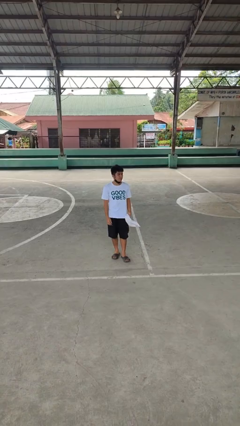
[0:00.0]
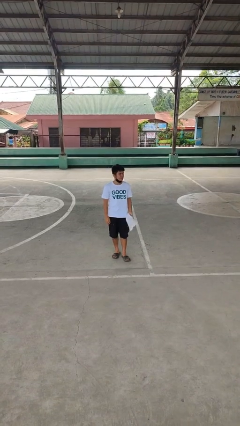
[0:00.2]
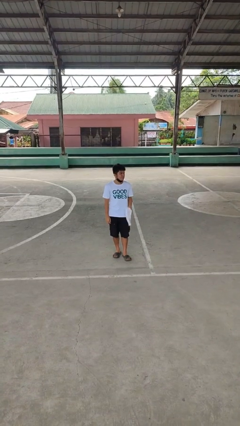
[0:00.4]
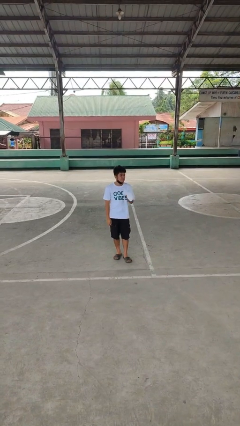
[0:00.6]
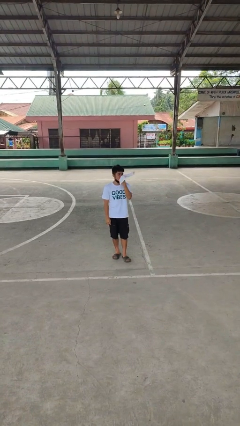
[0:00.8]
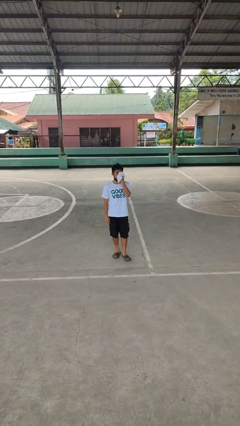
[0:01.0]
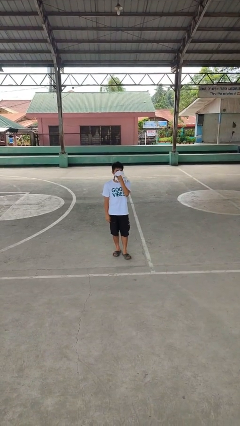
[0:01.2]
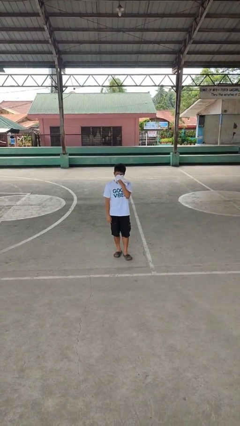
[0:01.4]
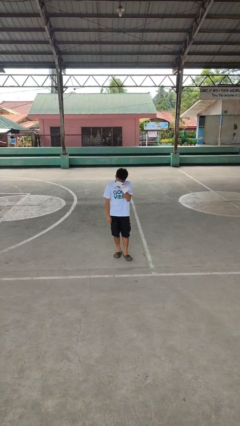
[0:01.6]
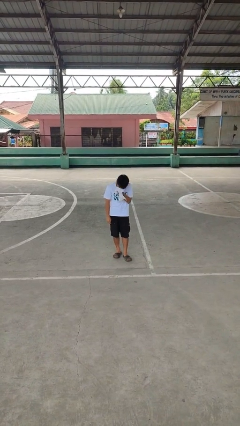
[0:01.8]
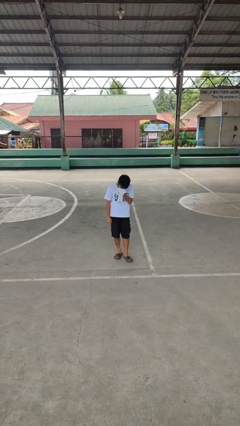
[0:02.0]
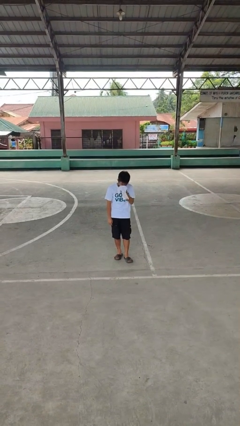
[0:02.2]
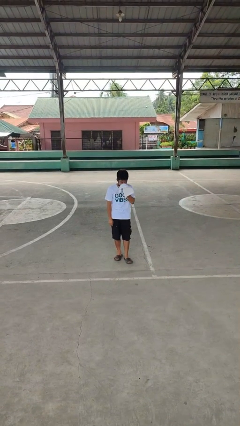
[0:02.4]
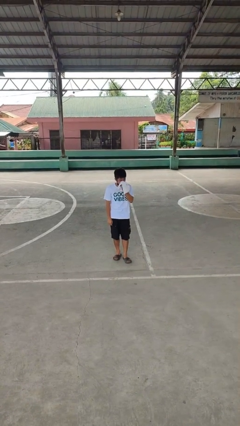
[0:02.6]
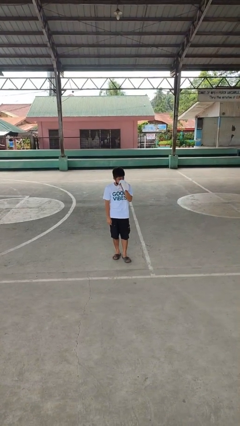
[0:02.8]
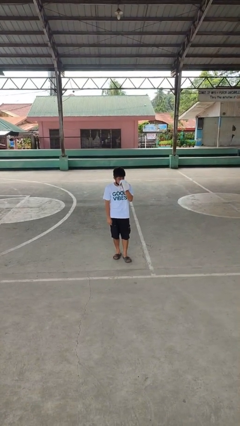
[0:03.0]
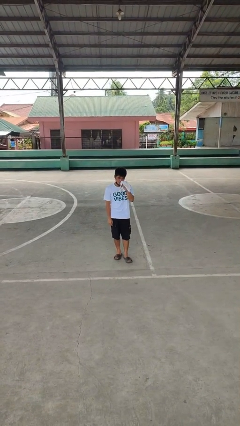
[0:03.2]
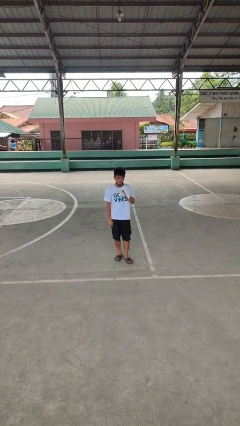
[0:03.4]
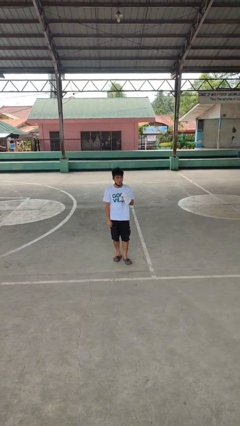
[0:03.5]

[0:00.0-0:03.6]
person blows nose

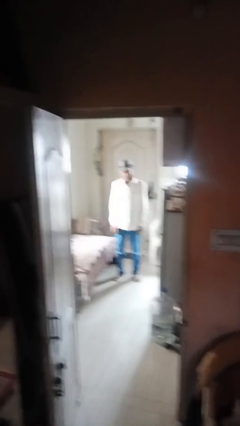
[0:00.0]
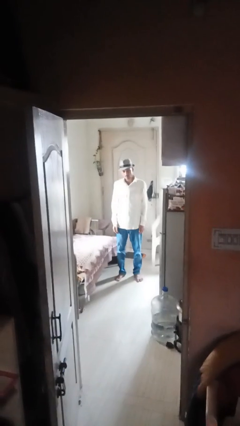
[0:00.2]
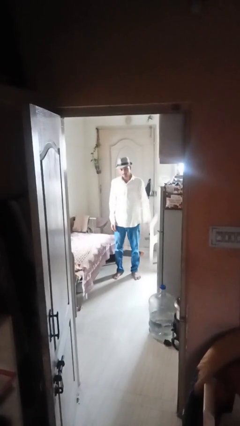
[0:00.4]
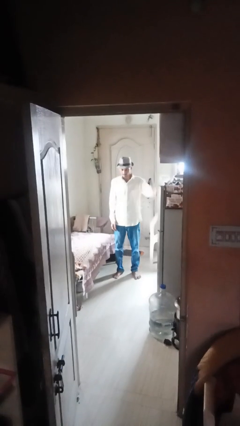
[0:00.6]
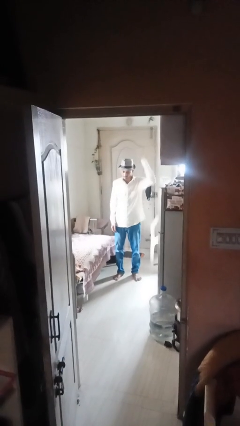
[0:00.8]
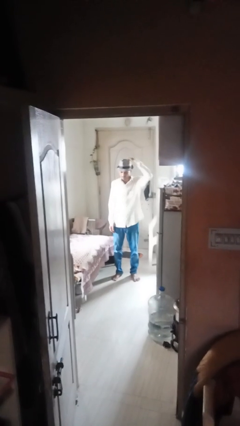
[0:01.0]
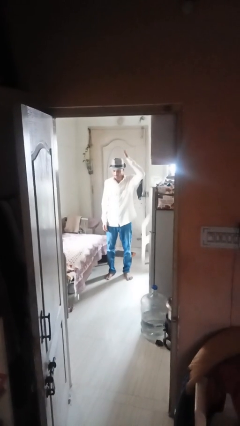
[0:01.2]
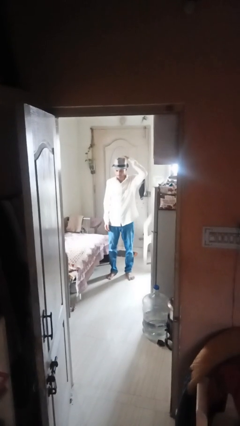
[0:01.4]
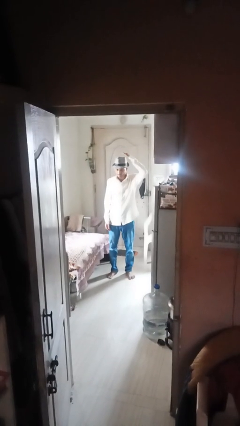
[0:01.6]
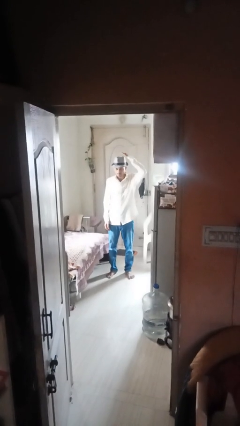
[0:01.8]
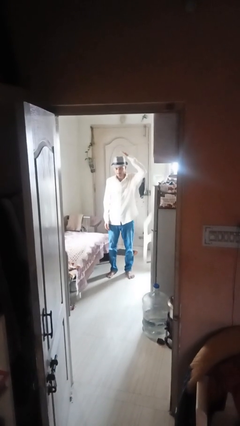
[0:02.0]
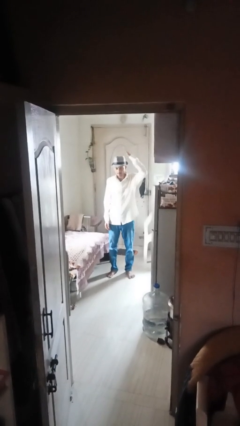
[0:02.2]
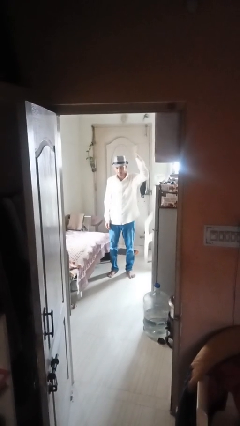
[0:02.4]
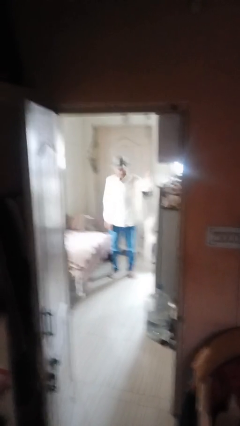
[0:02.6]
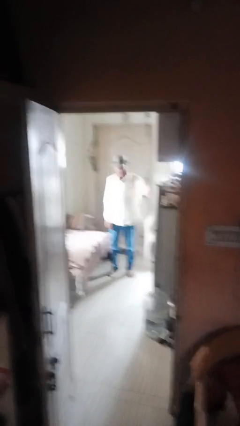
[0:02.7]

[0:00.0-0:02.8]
person pats head

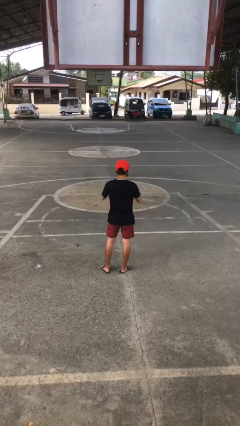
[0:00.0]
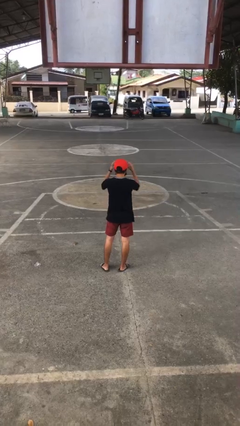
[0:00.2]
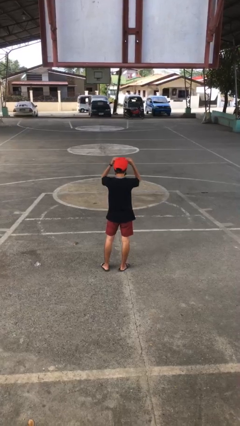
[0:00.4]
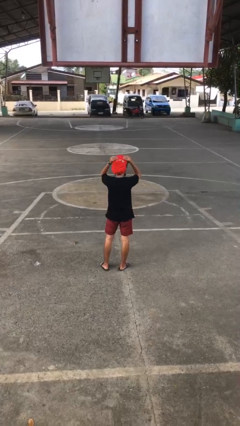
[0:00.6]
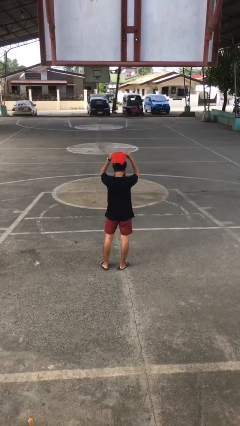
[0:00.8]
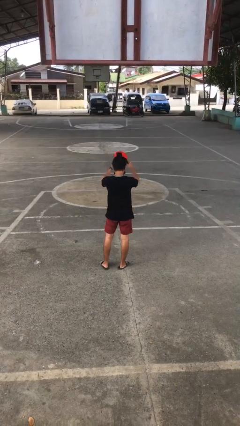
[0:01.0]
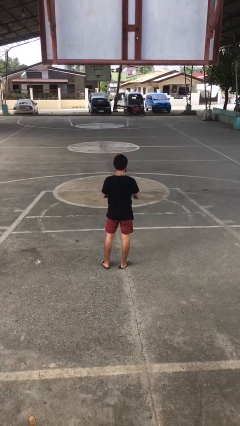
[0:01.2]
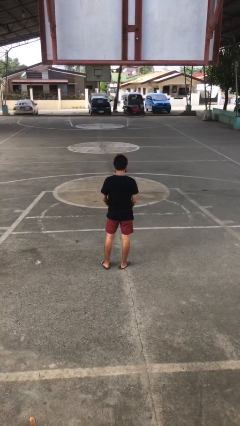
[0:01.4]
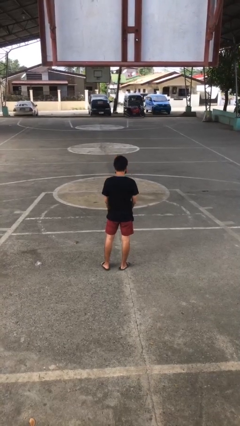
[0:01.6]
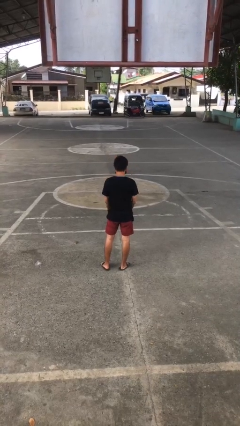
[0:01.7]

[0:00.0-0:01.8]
person takes off hat

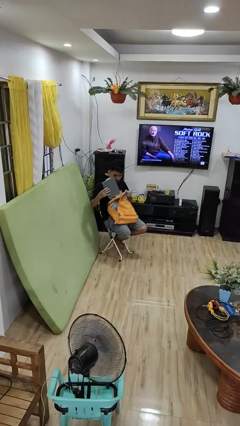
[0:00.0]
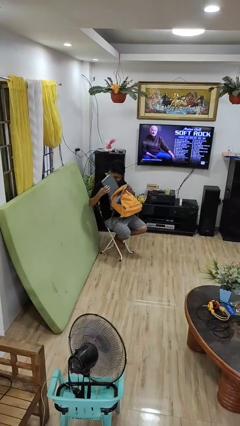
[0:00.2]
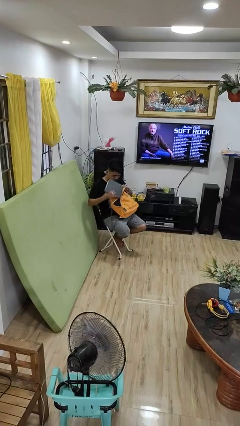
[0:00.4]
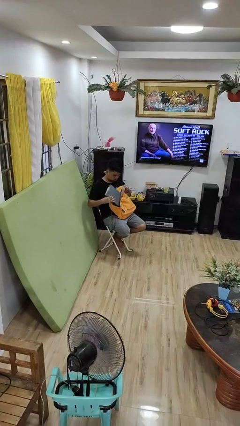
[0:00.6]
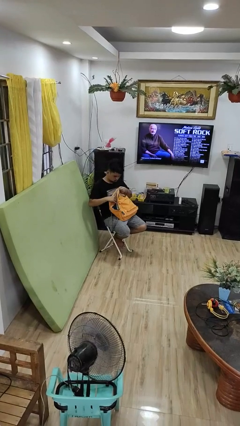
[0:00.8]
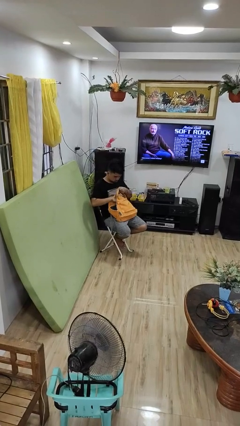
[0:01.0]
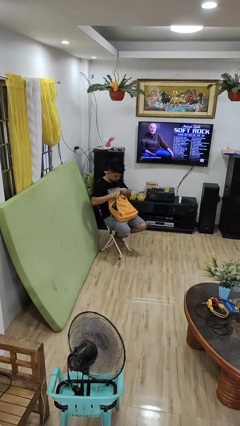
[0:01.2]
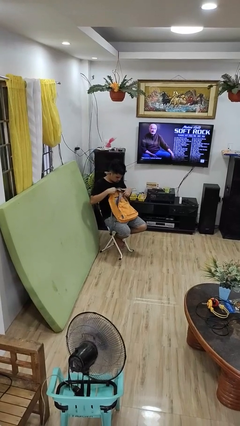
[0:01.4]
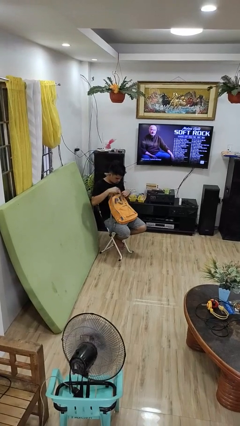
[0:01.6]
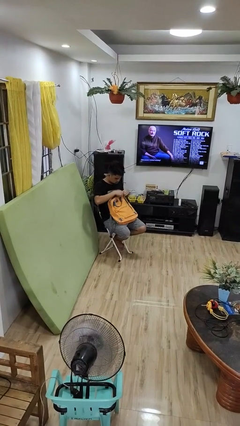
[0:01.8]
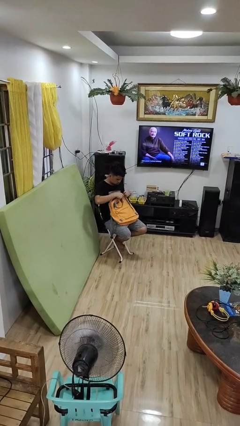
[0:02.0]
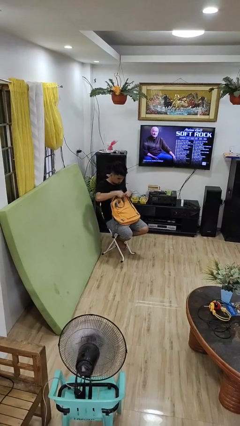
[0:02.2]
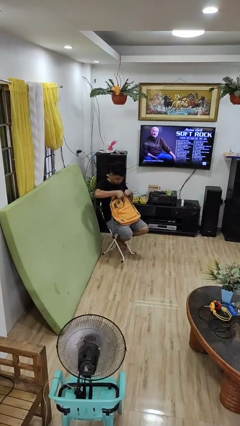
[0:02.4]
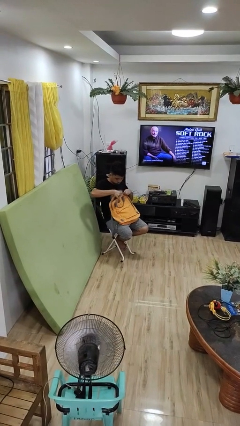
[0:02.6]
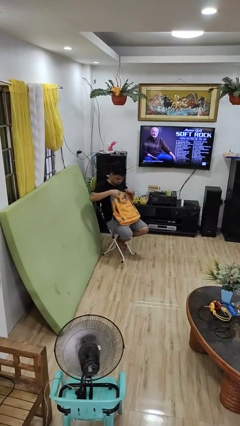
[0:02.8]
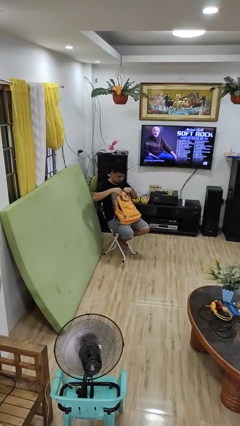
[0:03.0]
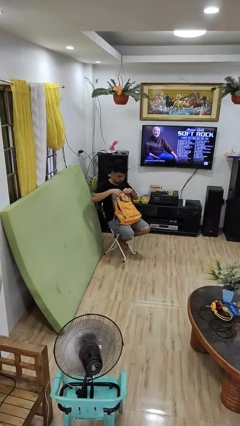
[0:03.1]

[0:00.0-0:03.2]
person puts object into backpack

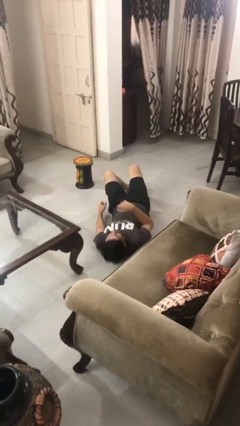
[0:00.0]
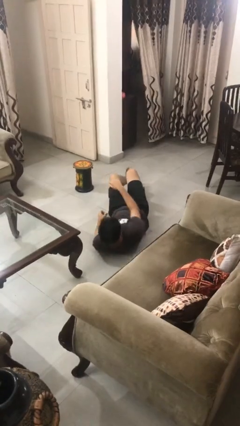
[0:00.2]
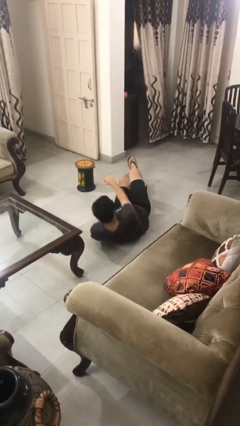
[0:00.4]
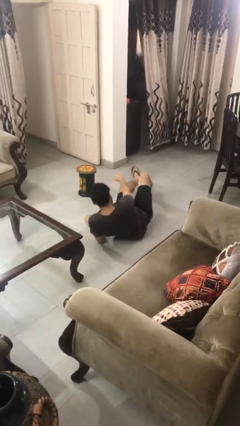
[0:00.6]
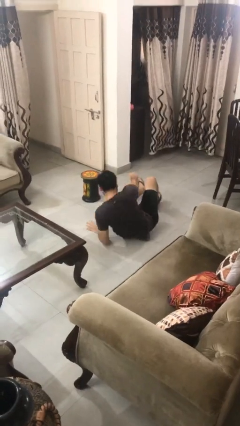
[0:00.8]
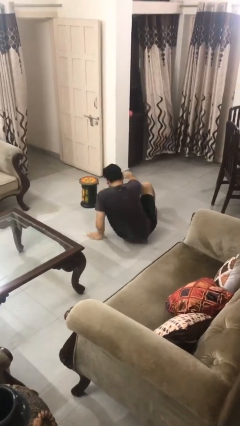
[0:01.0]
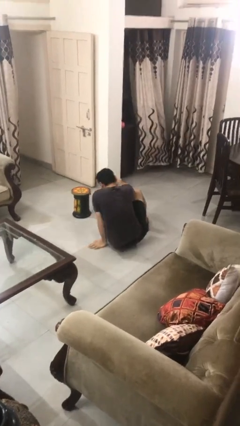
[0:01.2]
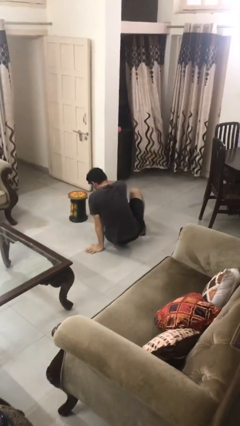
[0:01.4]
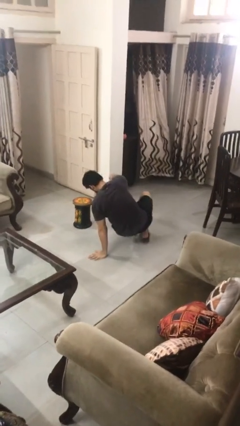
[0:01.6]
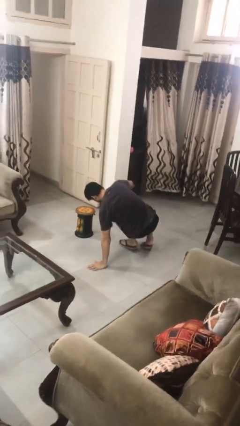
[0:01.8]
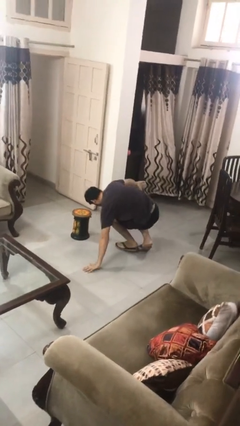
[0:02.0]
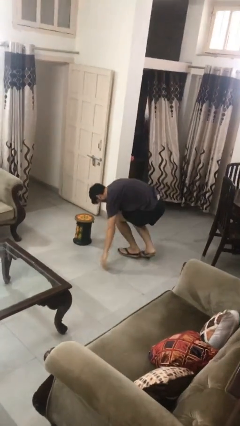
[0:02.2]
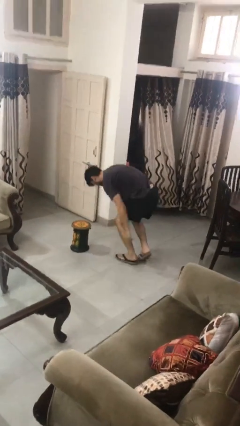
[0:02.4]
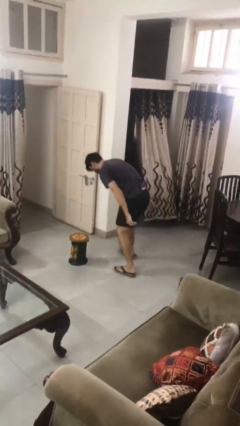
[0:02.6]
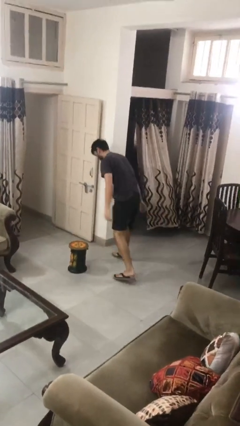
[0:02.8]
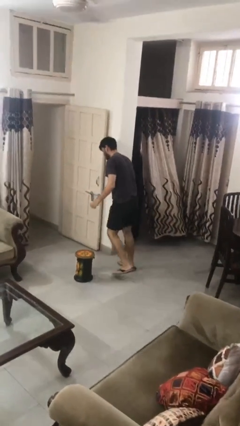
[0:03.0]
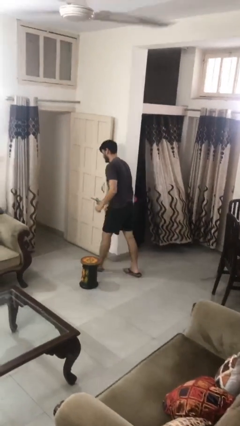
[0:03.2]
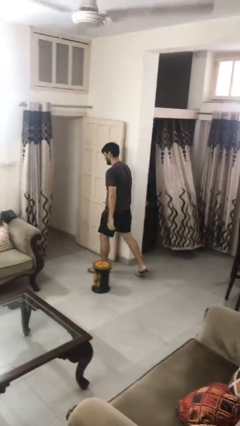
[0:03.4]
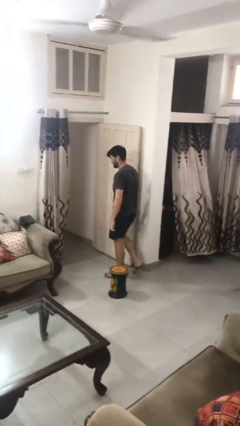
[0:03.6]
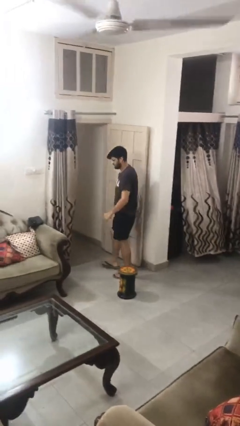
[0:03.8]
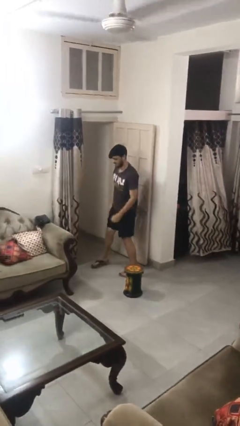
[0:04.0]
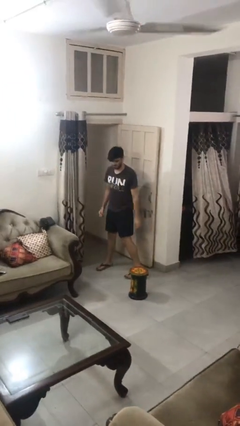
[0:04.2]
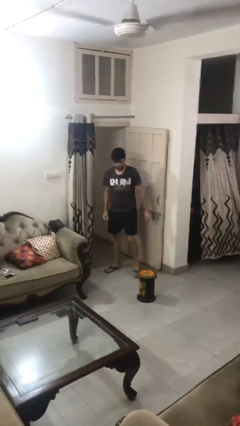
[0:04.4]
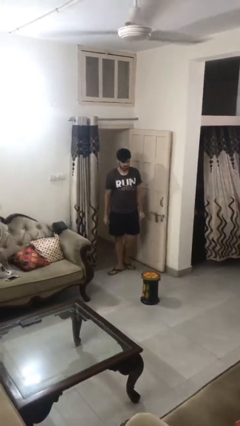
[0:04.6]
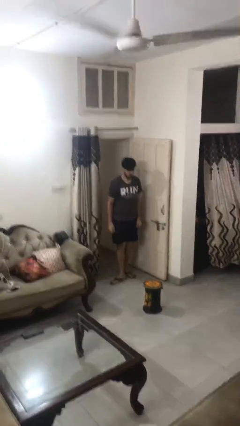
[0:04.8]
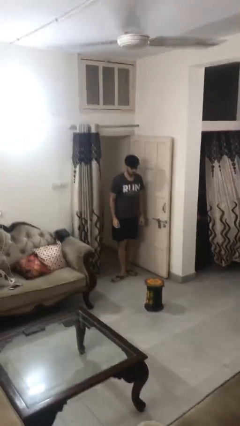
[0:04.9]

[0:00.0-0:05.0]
person stands up from floor

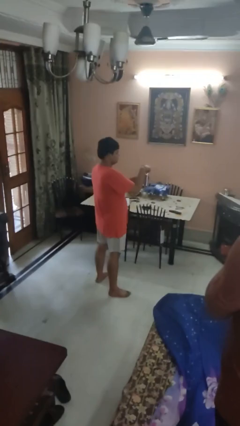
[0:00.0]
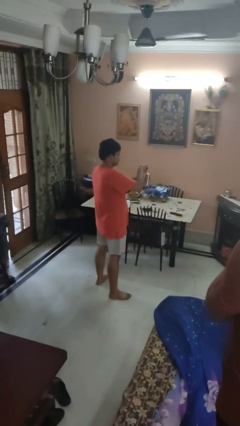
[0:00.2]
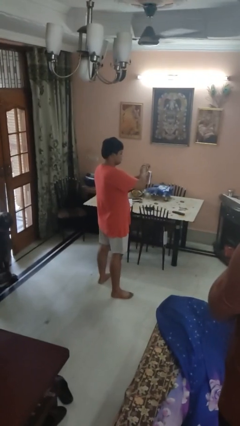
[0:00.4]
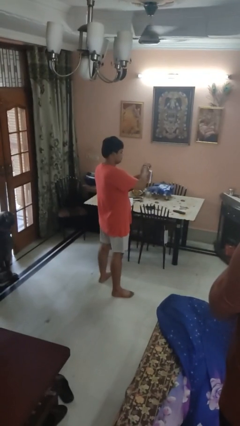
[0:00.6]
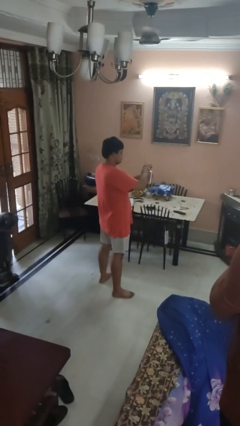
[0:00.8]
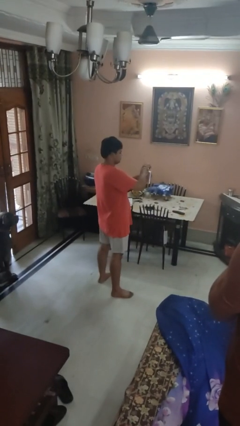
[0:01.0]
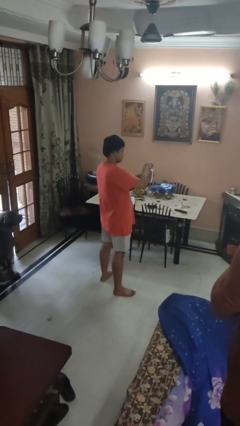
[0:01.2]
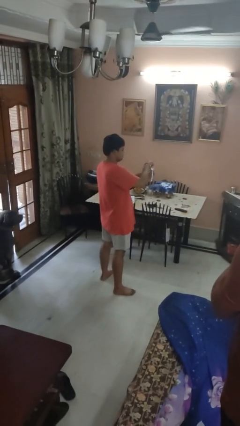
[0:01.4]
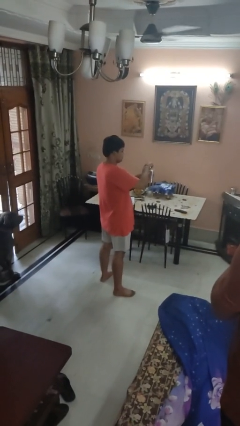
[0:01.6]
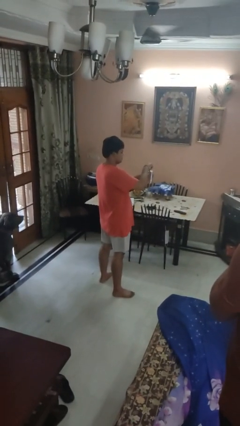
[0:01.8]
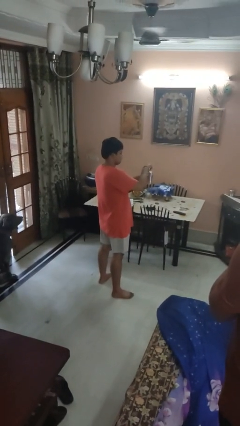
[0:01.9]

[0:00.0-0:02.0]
person opens beverage can
